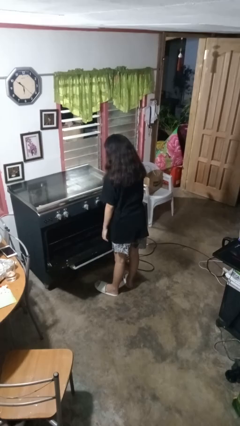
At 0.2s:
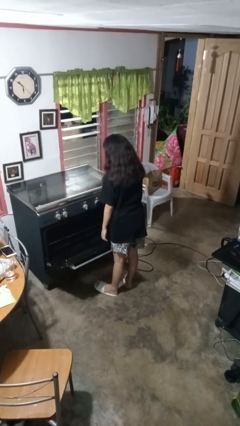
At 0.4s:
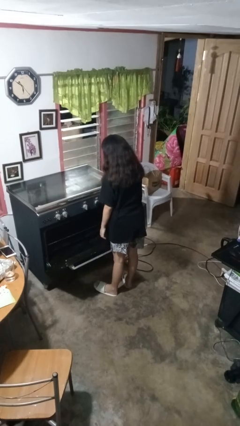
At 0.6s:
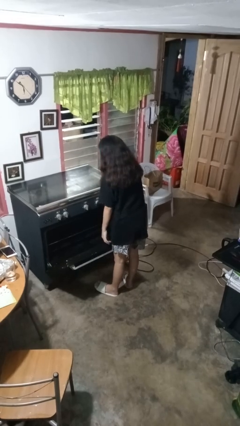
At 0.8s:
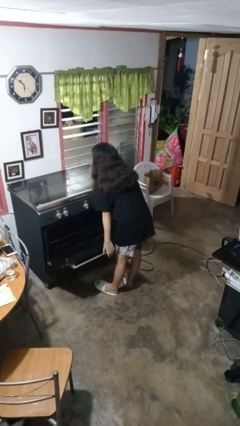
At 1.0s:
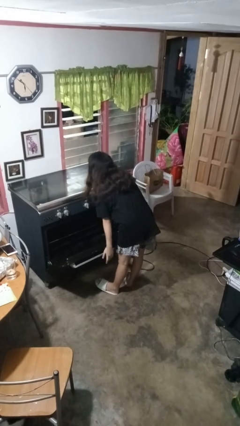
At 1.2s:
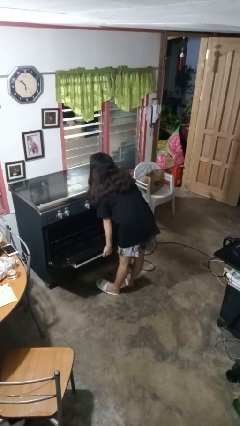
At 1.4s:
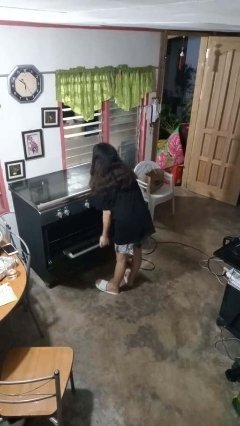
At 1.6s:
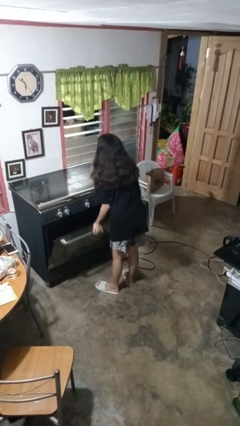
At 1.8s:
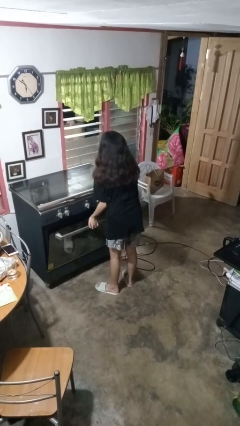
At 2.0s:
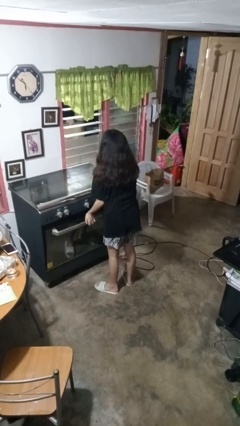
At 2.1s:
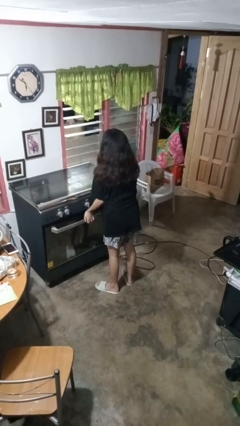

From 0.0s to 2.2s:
person closes oven door

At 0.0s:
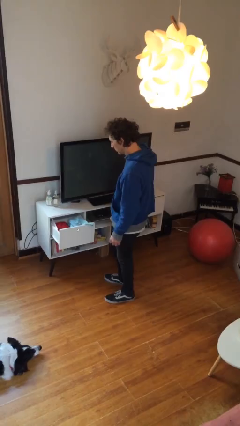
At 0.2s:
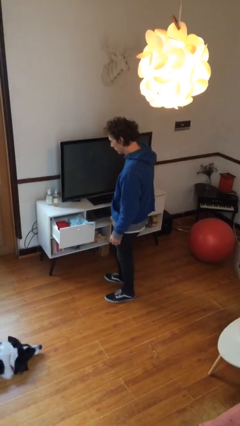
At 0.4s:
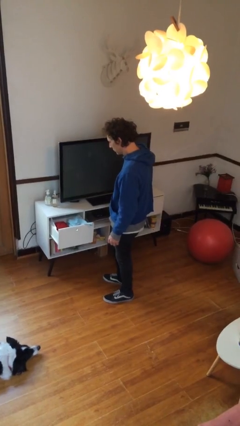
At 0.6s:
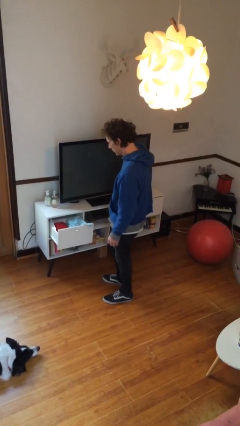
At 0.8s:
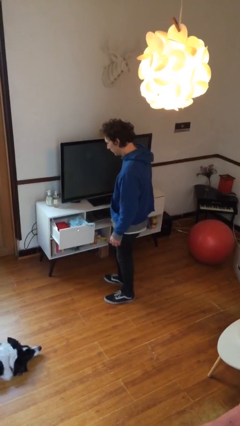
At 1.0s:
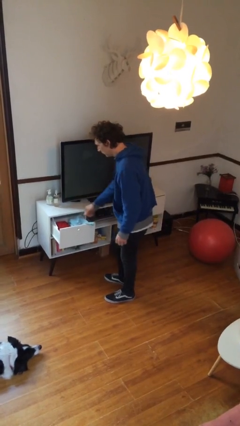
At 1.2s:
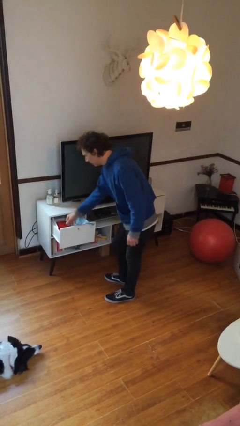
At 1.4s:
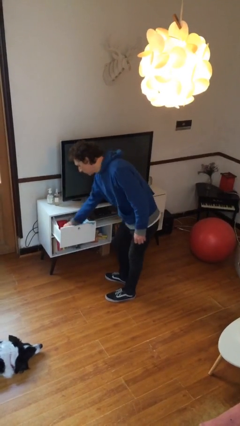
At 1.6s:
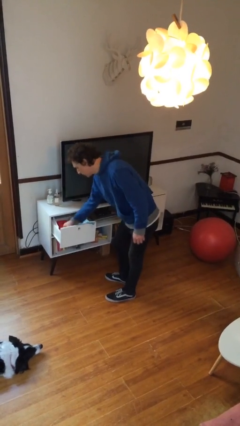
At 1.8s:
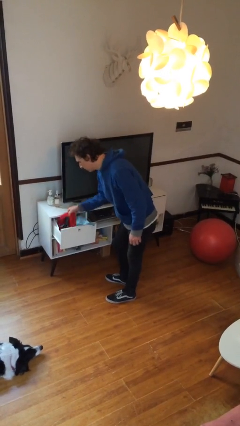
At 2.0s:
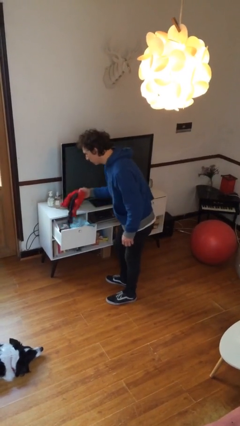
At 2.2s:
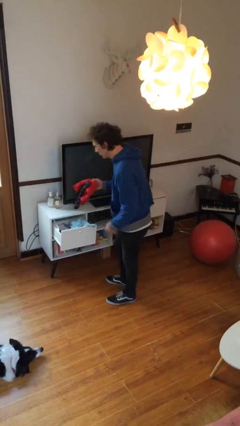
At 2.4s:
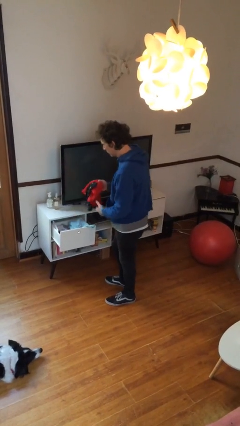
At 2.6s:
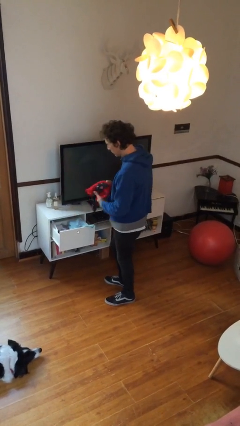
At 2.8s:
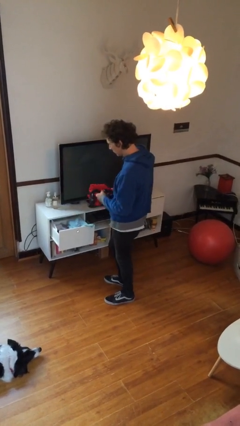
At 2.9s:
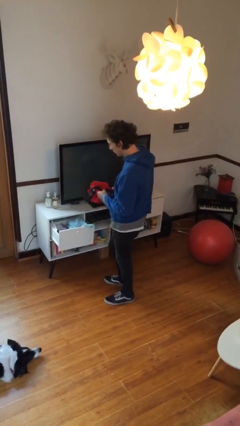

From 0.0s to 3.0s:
person takes clothes from dresser

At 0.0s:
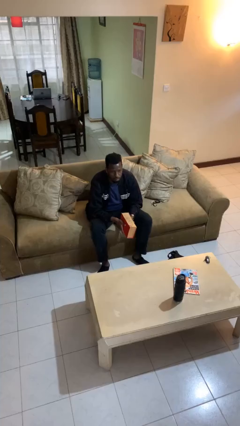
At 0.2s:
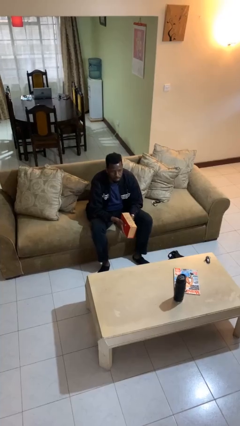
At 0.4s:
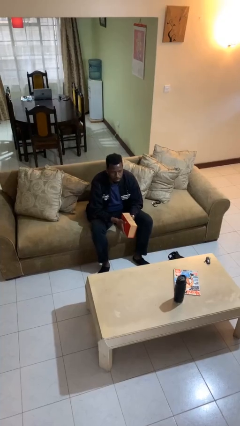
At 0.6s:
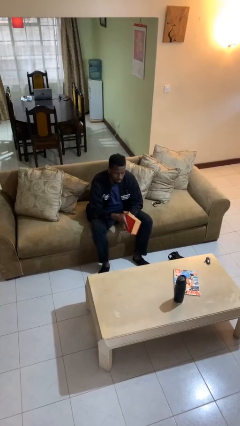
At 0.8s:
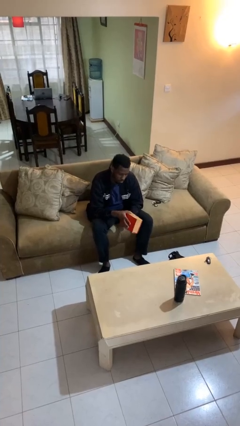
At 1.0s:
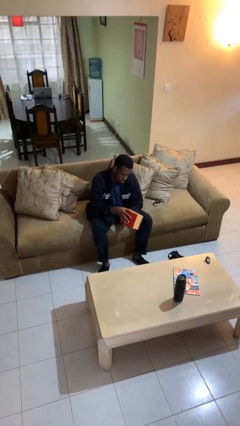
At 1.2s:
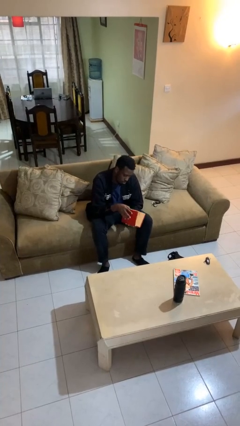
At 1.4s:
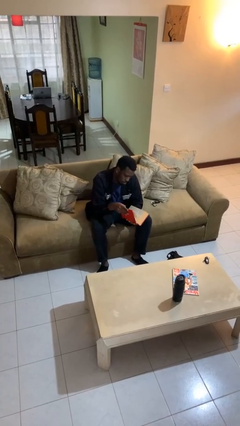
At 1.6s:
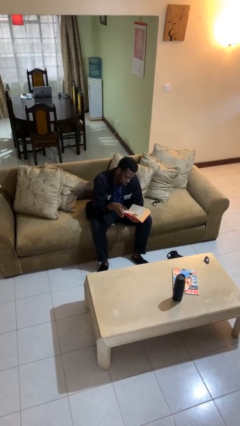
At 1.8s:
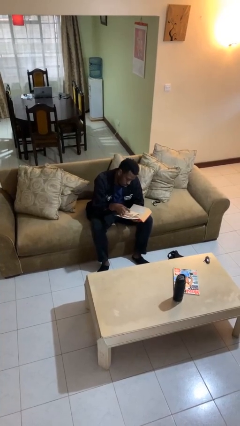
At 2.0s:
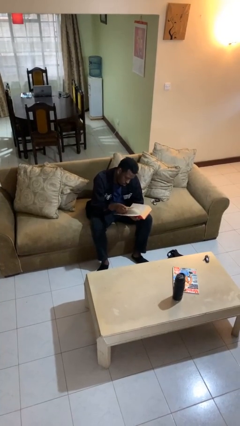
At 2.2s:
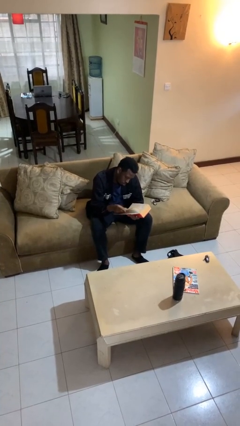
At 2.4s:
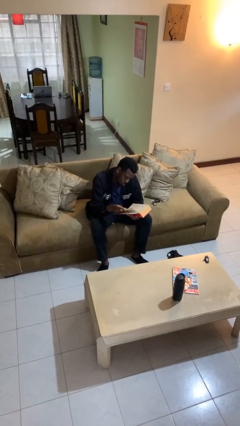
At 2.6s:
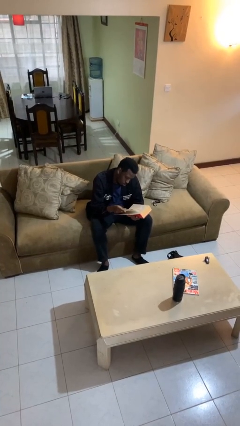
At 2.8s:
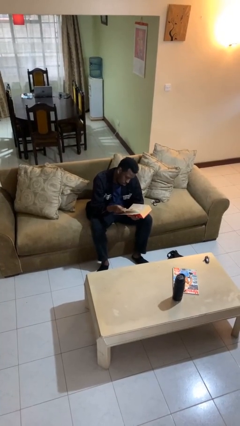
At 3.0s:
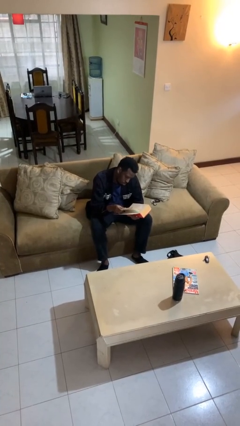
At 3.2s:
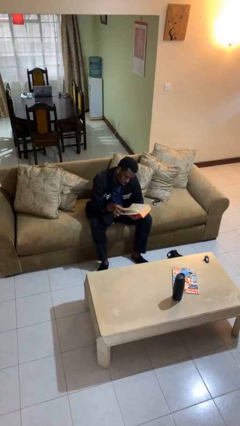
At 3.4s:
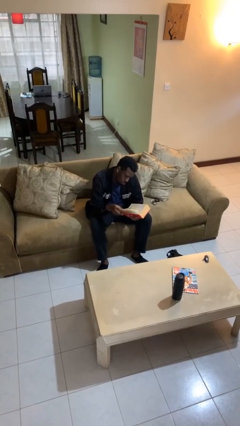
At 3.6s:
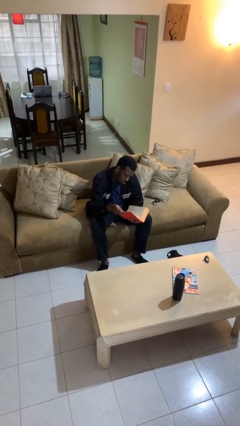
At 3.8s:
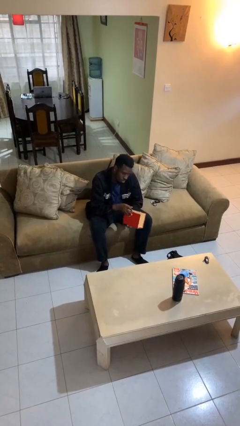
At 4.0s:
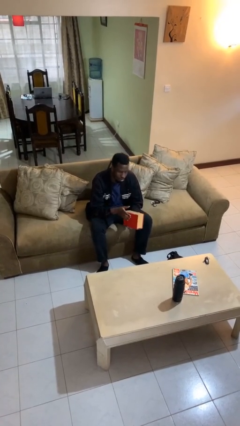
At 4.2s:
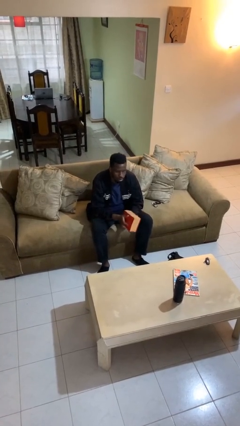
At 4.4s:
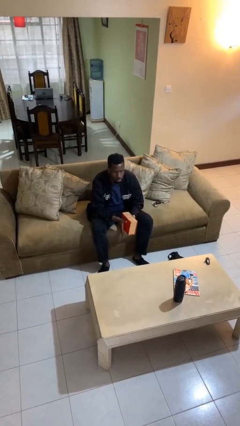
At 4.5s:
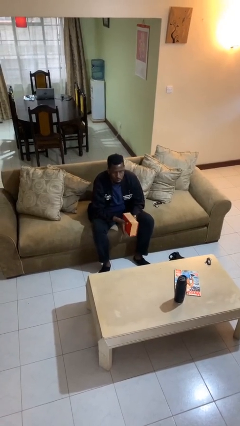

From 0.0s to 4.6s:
person reads book

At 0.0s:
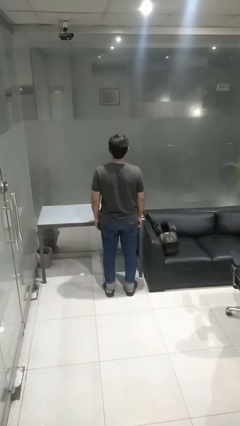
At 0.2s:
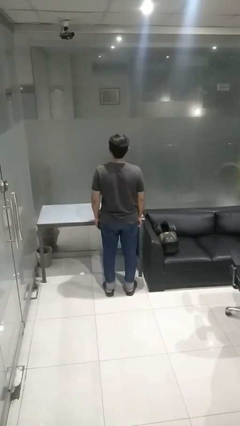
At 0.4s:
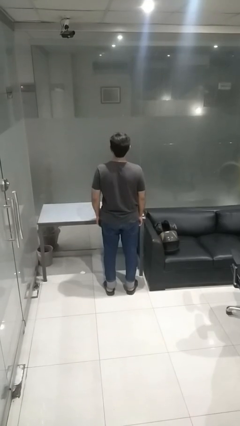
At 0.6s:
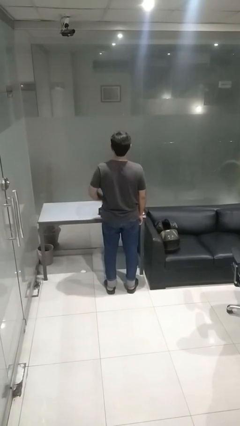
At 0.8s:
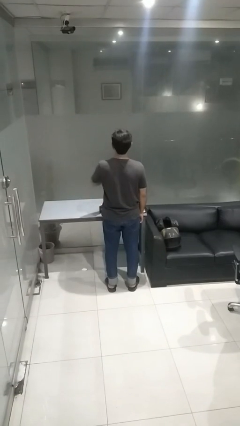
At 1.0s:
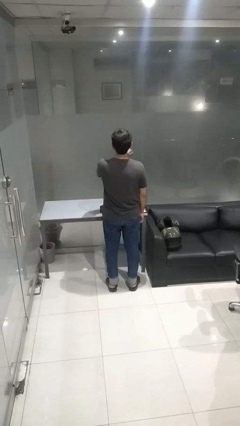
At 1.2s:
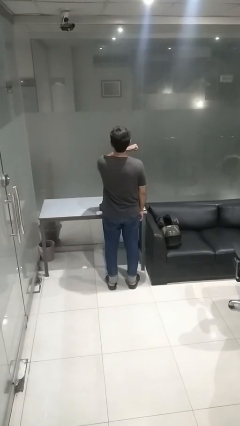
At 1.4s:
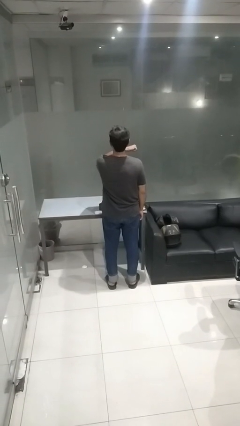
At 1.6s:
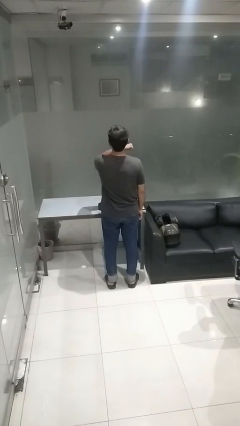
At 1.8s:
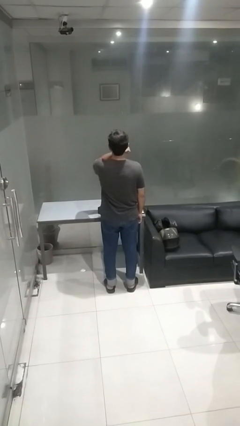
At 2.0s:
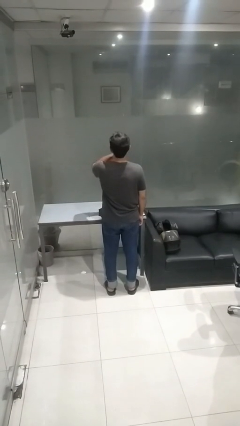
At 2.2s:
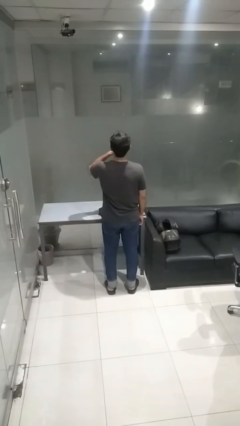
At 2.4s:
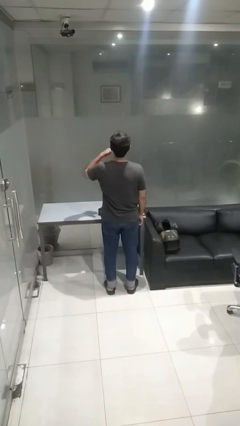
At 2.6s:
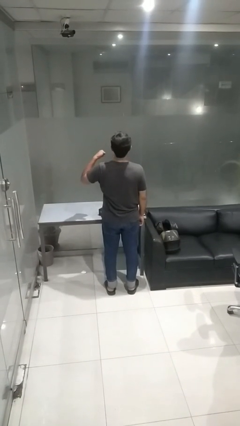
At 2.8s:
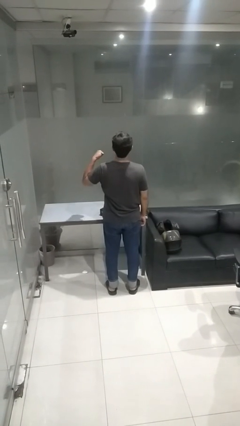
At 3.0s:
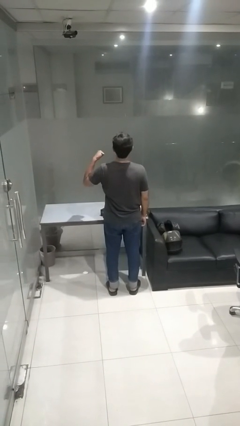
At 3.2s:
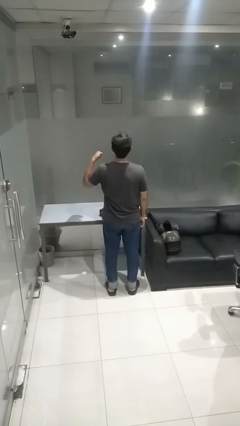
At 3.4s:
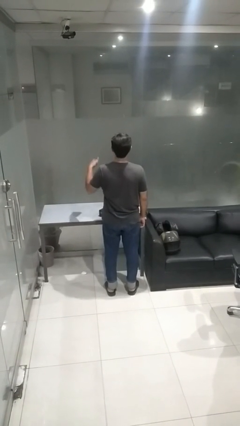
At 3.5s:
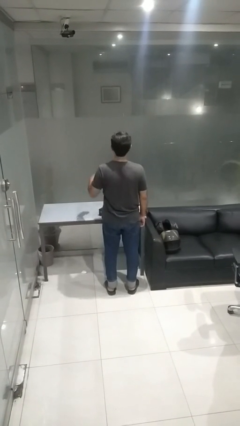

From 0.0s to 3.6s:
person gestures cut

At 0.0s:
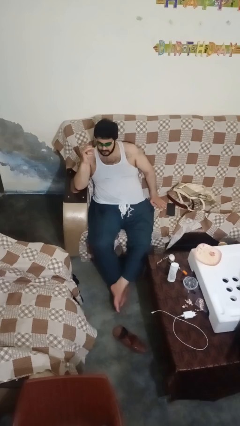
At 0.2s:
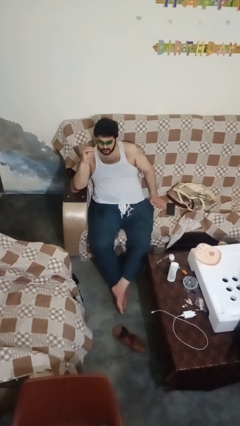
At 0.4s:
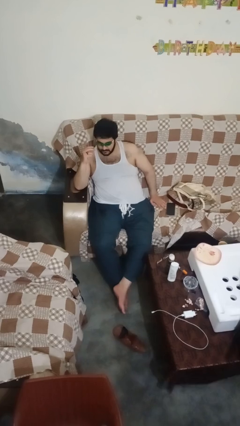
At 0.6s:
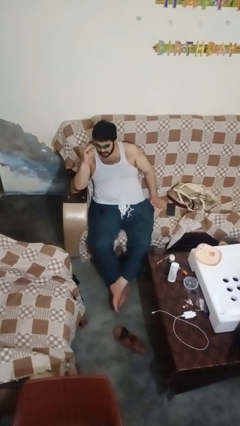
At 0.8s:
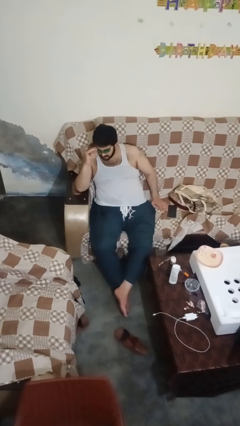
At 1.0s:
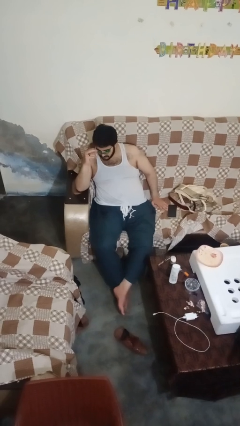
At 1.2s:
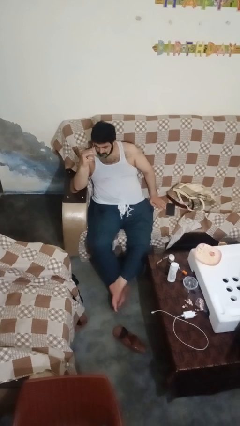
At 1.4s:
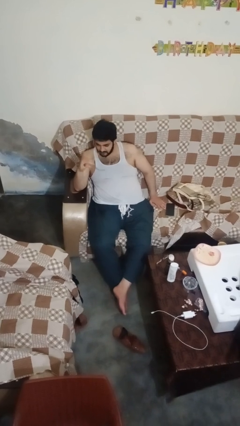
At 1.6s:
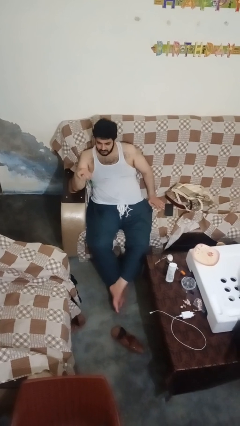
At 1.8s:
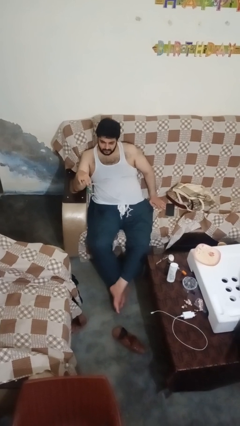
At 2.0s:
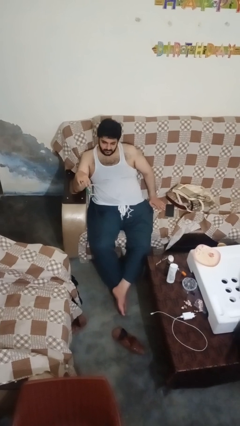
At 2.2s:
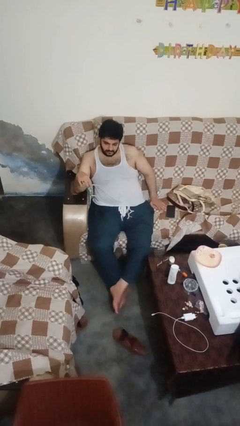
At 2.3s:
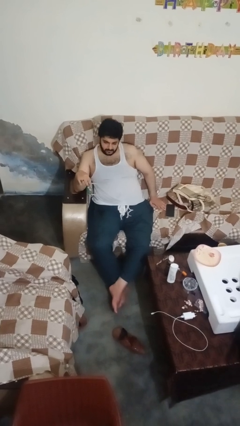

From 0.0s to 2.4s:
person takes off sunglasses

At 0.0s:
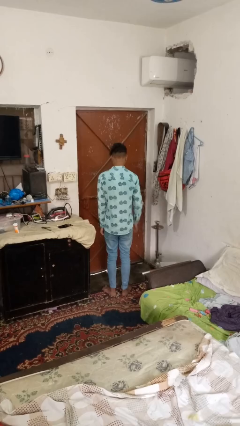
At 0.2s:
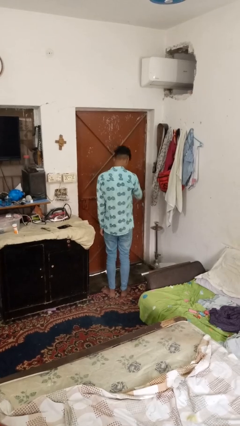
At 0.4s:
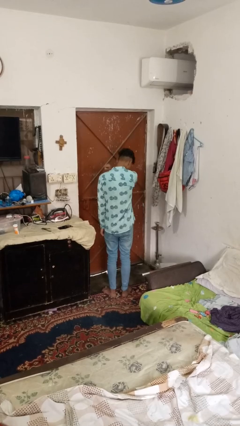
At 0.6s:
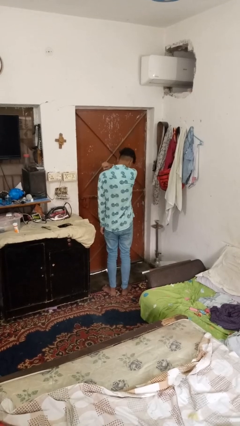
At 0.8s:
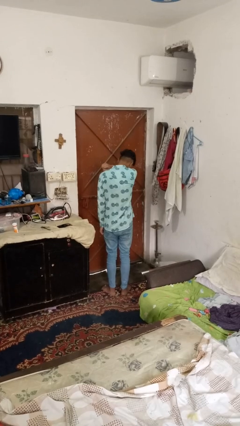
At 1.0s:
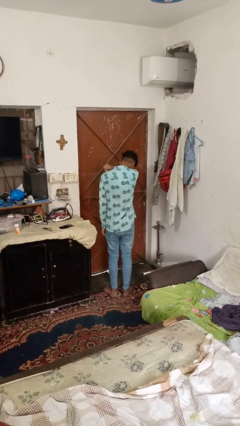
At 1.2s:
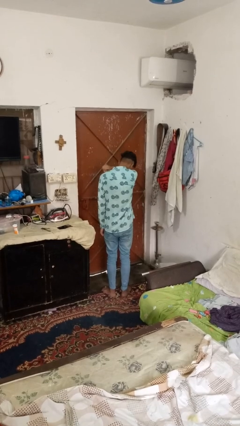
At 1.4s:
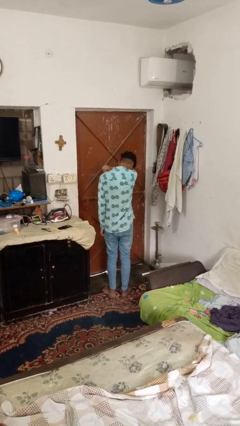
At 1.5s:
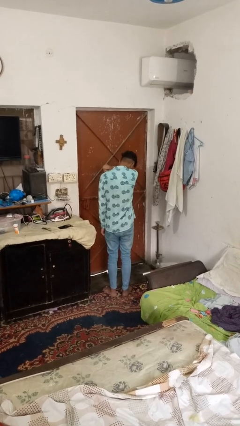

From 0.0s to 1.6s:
person sneezes into arm

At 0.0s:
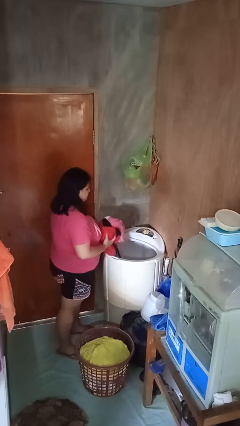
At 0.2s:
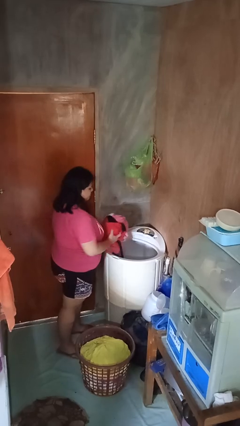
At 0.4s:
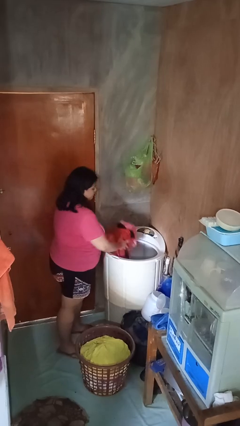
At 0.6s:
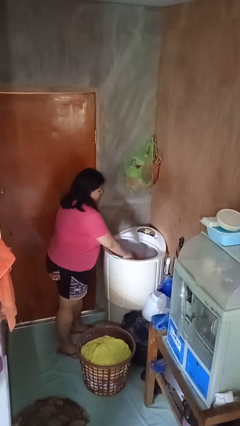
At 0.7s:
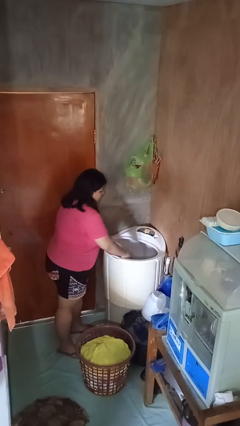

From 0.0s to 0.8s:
person loads clotheswasher
